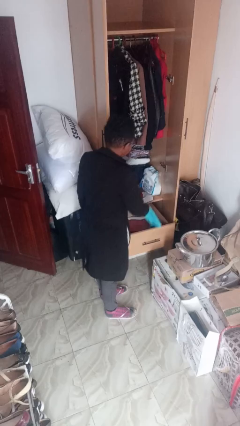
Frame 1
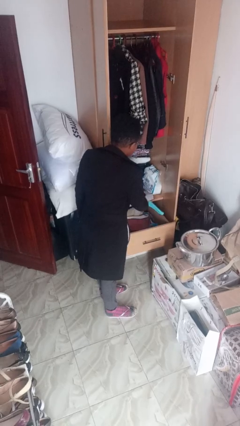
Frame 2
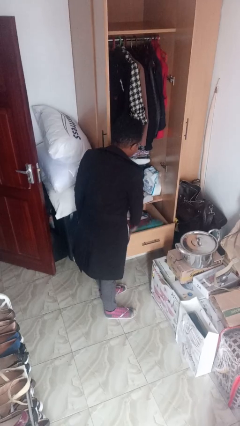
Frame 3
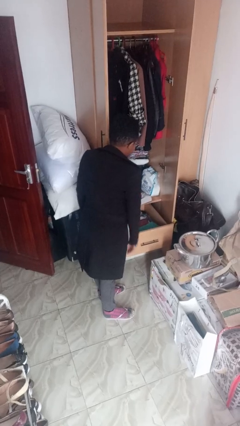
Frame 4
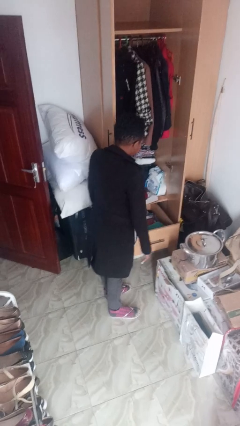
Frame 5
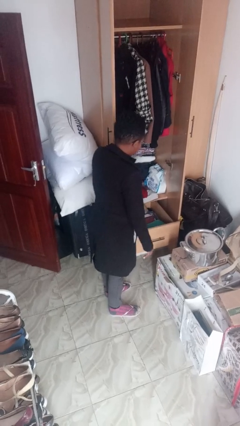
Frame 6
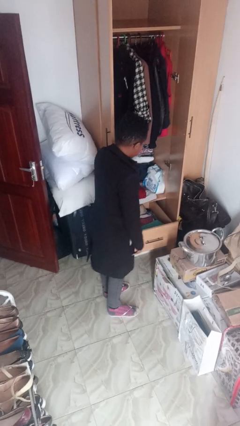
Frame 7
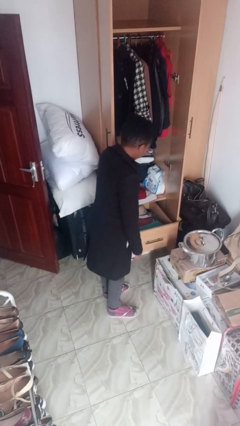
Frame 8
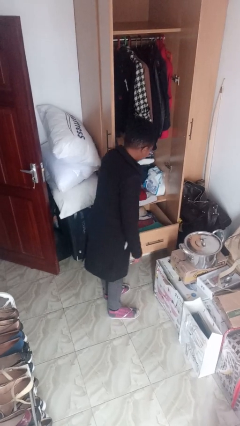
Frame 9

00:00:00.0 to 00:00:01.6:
person puts clothes into dresser

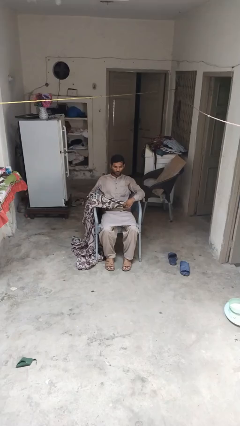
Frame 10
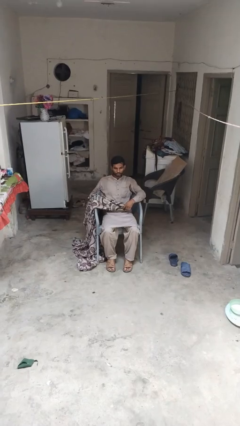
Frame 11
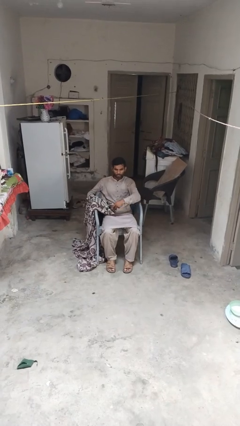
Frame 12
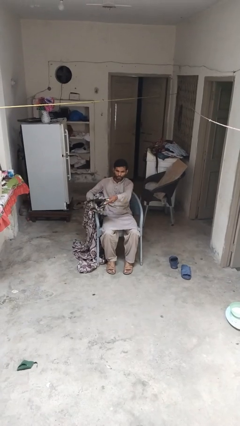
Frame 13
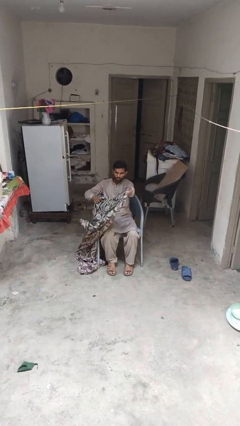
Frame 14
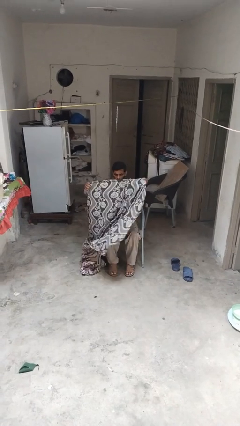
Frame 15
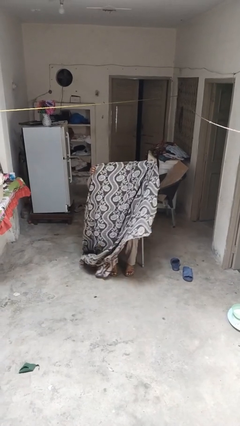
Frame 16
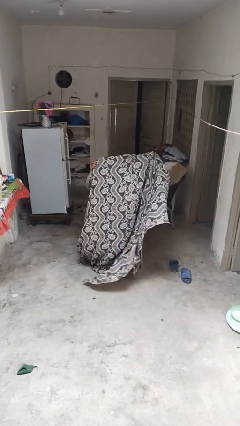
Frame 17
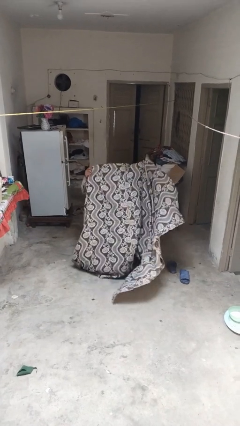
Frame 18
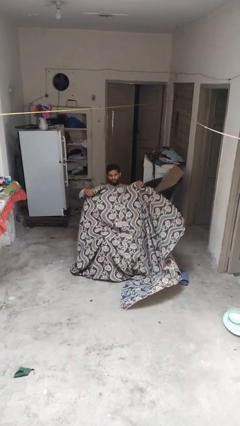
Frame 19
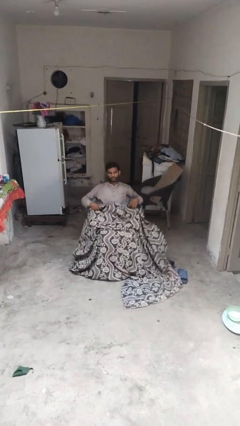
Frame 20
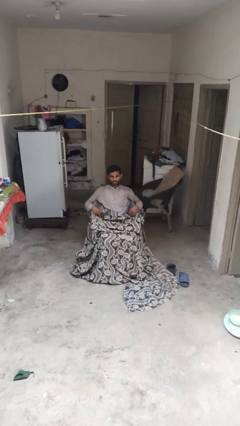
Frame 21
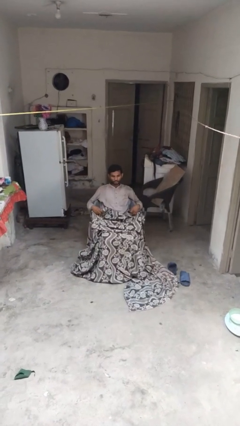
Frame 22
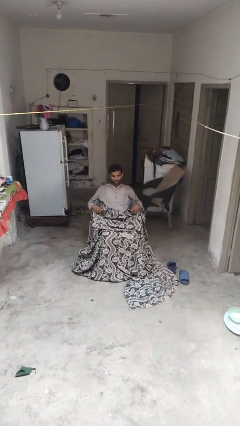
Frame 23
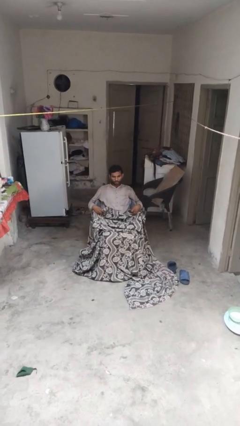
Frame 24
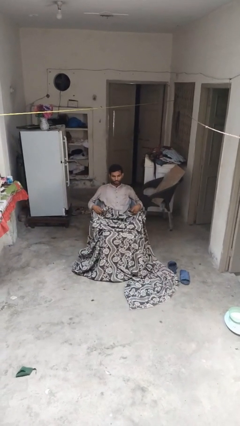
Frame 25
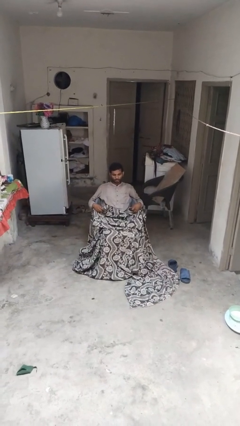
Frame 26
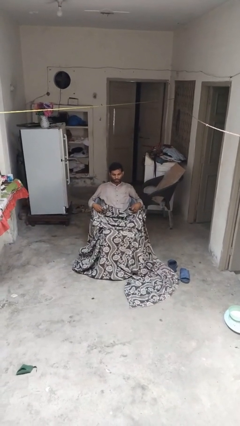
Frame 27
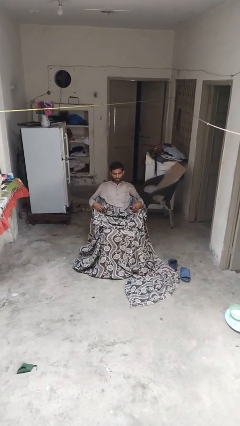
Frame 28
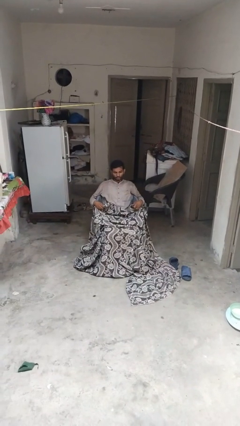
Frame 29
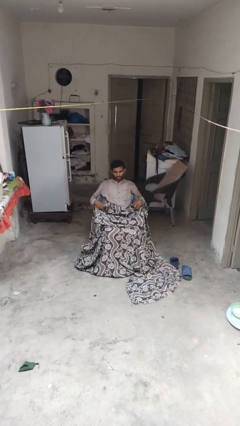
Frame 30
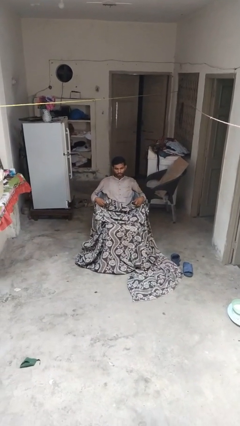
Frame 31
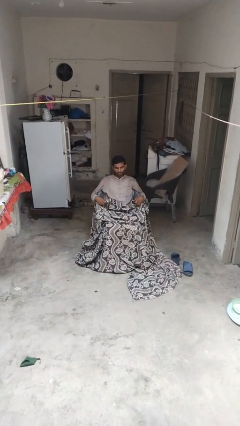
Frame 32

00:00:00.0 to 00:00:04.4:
person covers with blanket

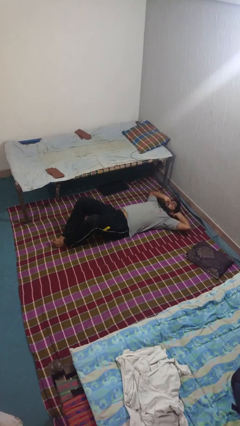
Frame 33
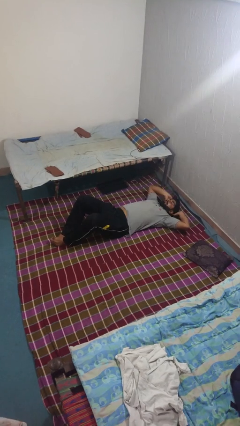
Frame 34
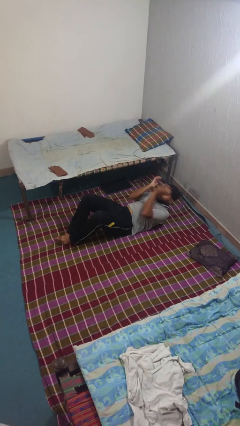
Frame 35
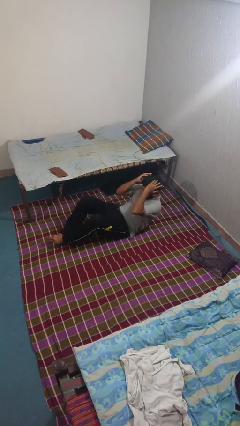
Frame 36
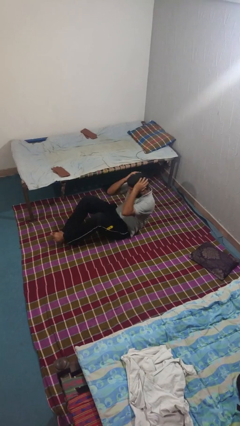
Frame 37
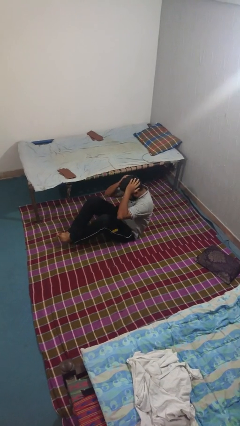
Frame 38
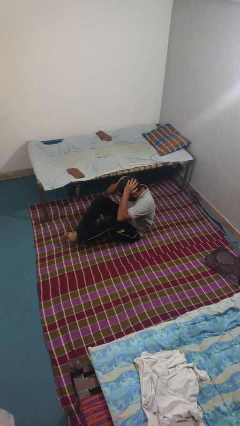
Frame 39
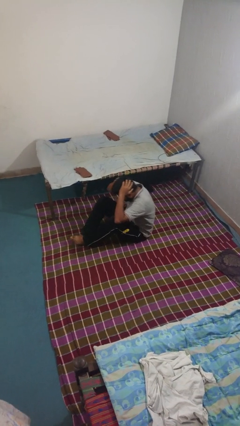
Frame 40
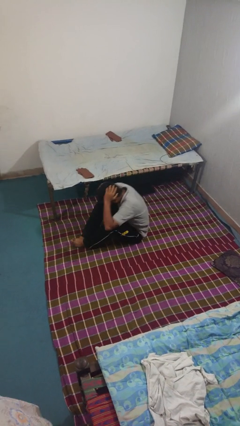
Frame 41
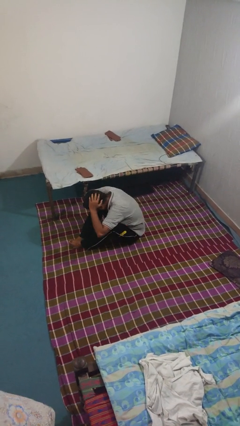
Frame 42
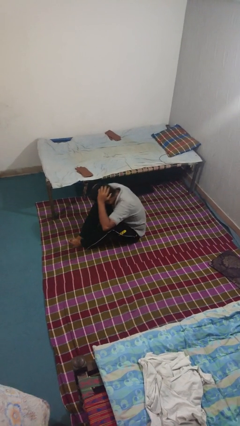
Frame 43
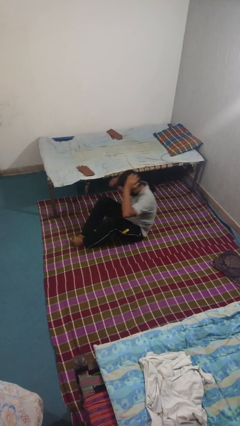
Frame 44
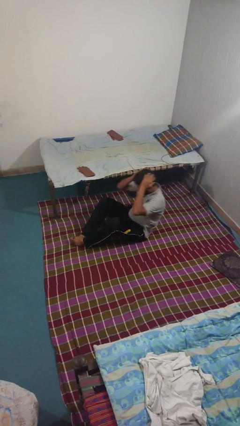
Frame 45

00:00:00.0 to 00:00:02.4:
person exercises with situp

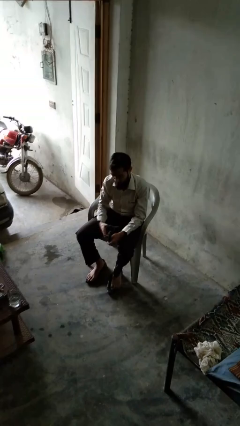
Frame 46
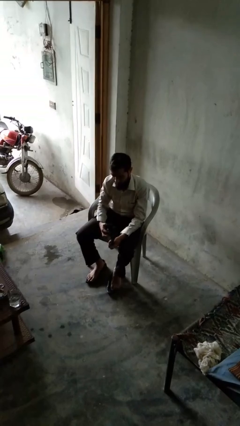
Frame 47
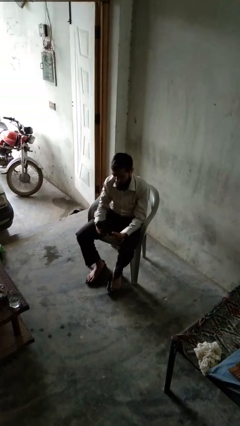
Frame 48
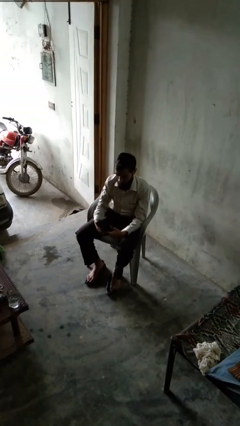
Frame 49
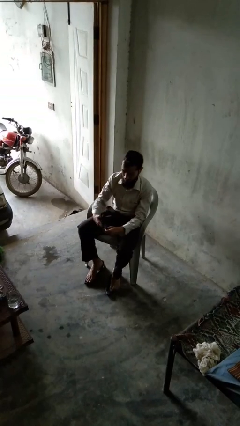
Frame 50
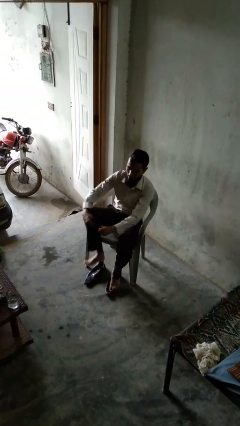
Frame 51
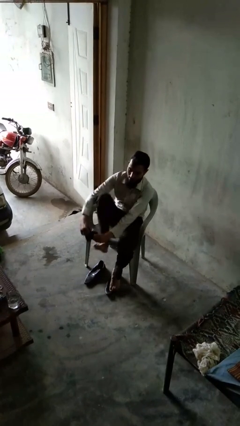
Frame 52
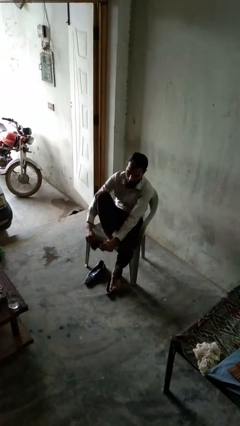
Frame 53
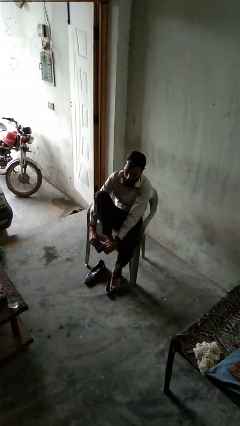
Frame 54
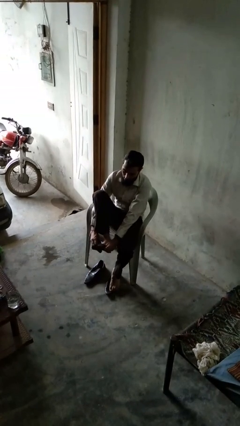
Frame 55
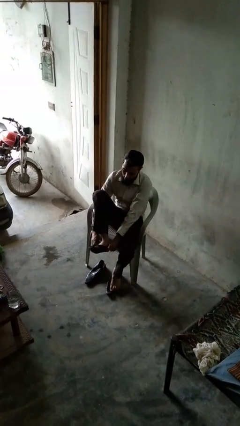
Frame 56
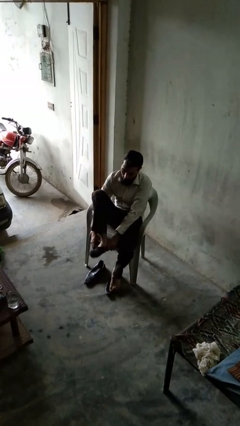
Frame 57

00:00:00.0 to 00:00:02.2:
person puts on socks

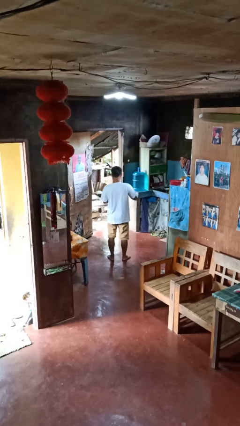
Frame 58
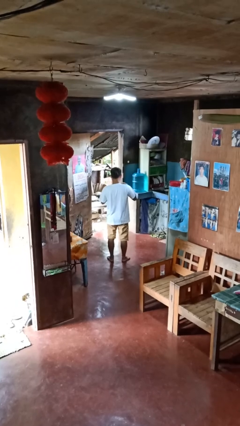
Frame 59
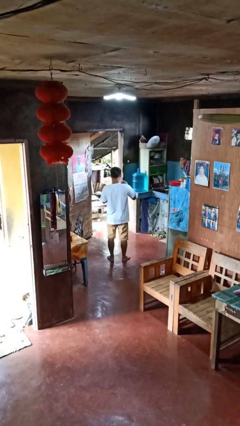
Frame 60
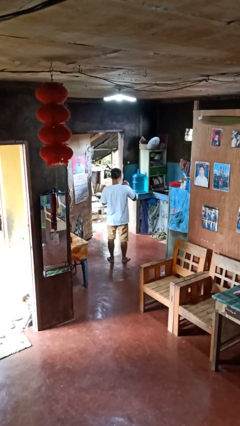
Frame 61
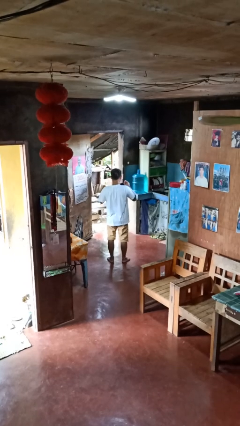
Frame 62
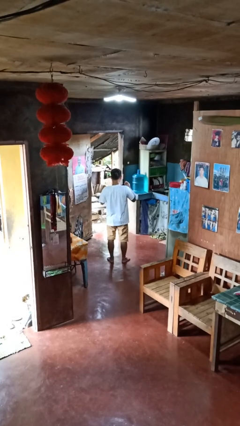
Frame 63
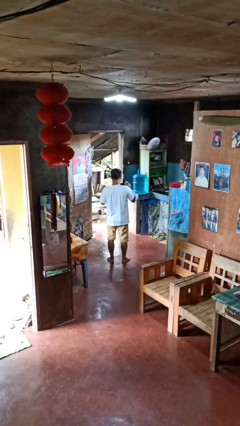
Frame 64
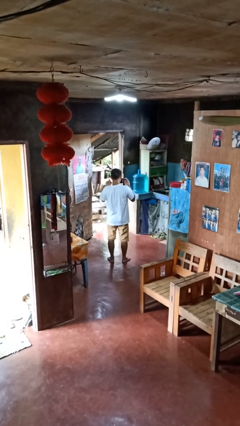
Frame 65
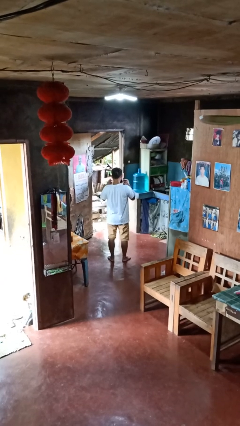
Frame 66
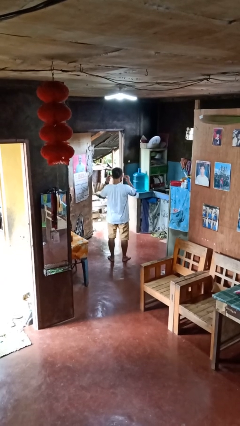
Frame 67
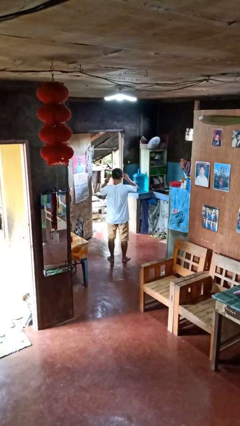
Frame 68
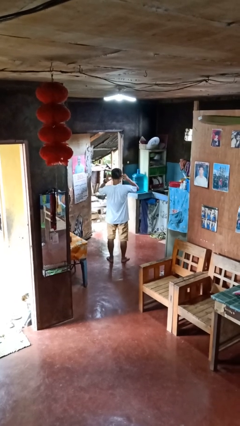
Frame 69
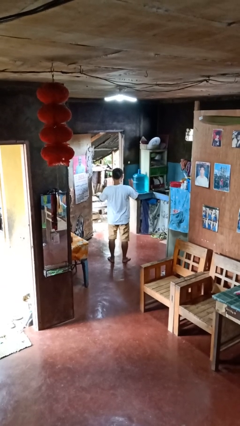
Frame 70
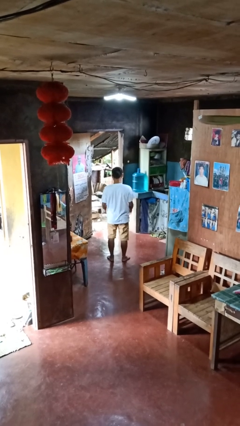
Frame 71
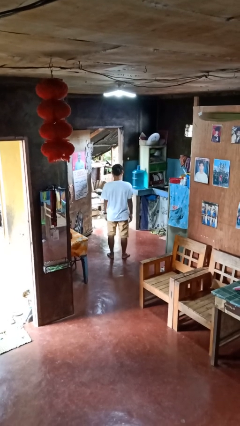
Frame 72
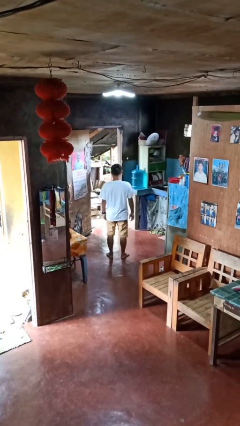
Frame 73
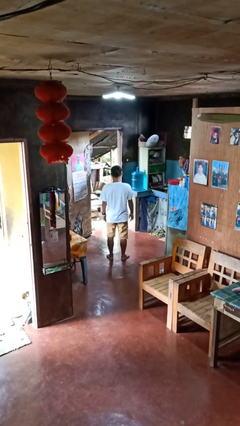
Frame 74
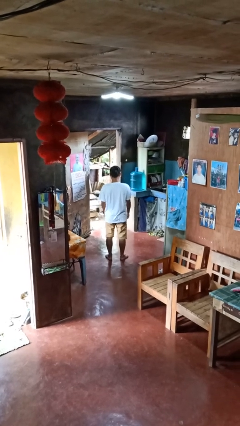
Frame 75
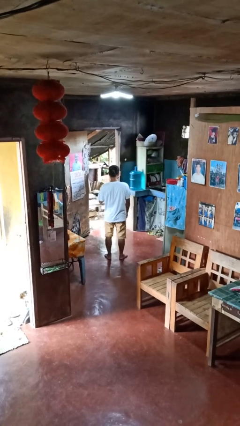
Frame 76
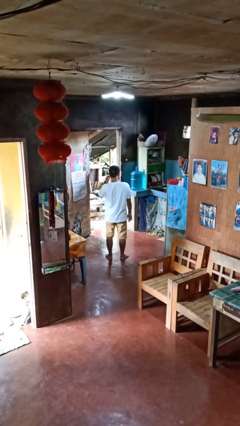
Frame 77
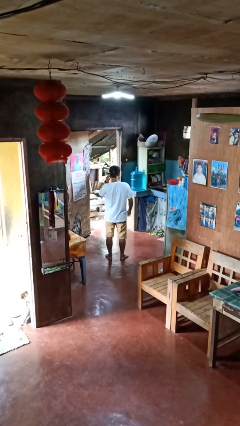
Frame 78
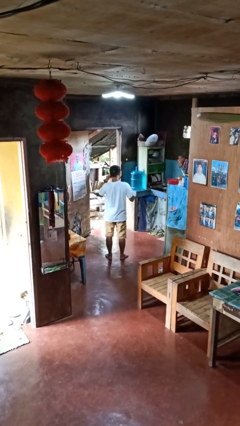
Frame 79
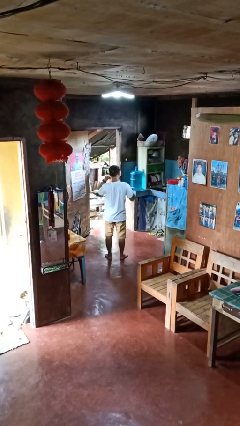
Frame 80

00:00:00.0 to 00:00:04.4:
person puts on facemask

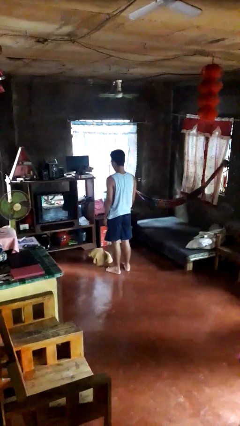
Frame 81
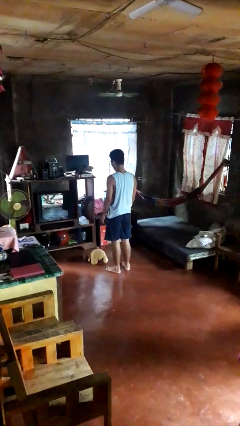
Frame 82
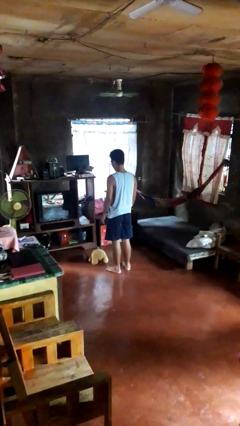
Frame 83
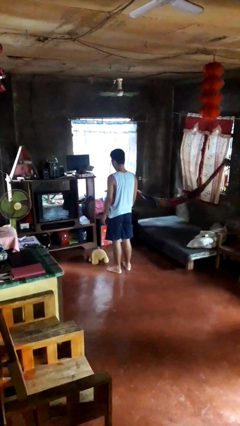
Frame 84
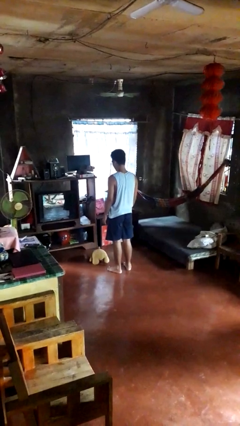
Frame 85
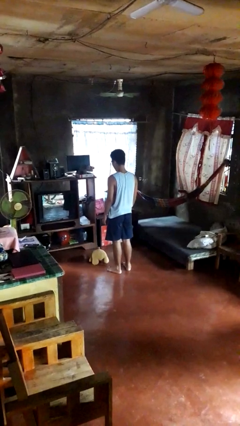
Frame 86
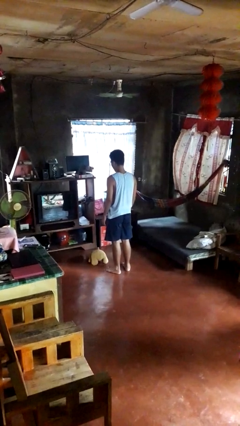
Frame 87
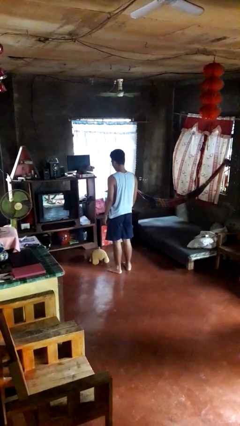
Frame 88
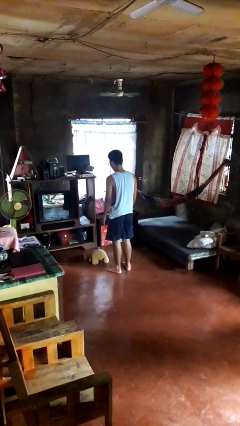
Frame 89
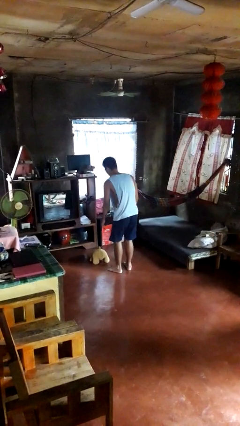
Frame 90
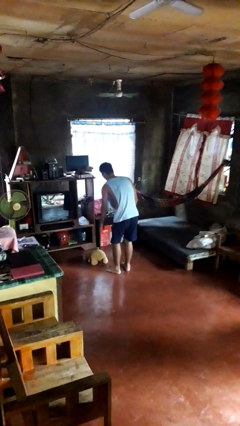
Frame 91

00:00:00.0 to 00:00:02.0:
person drops object

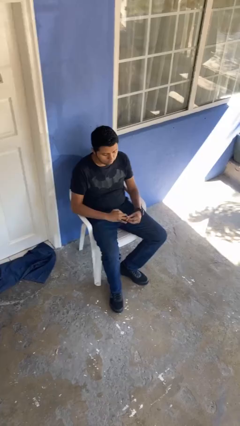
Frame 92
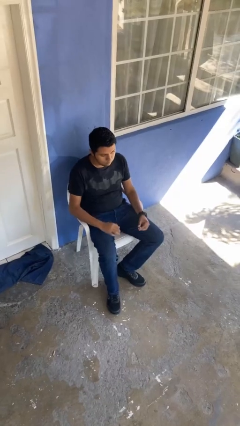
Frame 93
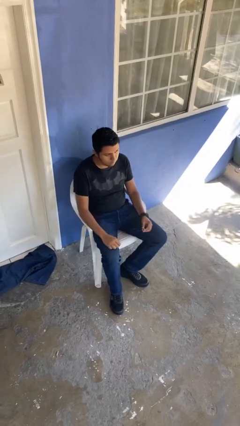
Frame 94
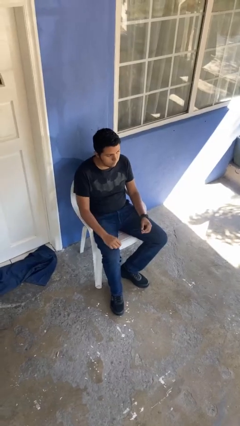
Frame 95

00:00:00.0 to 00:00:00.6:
person takes off ring
